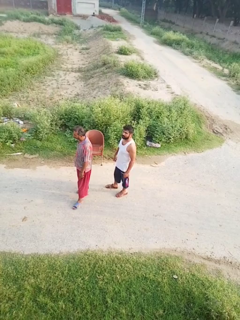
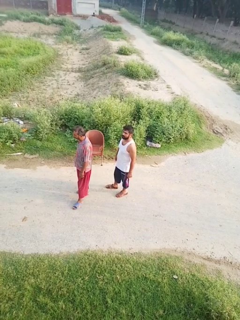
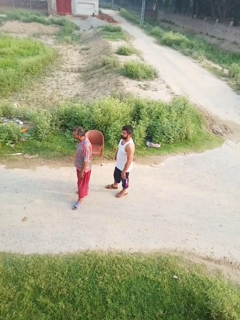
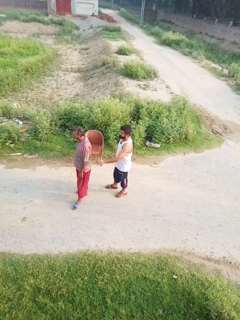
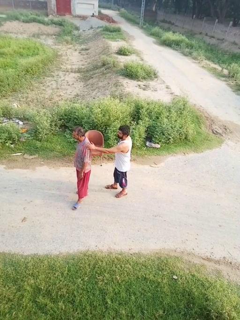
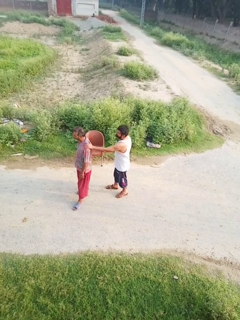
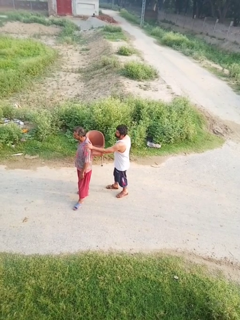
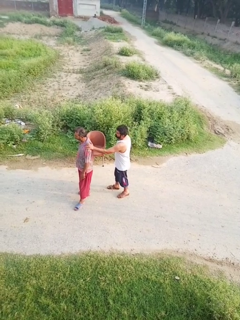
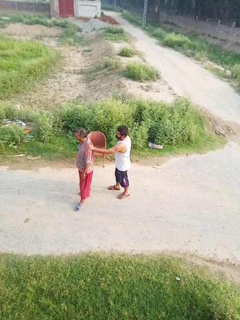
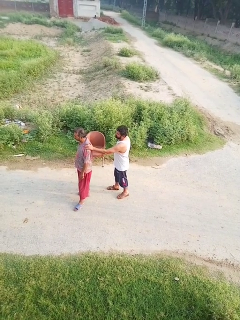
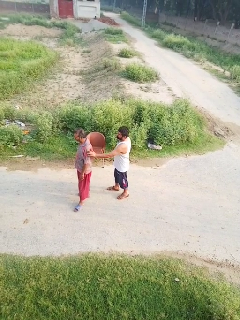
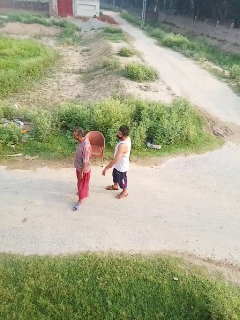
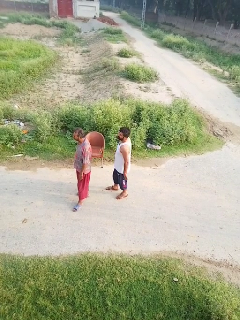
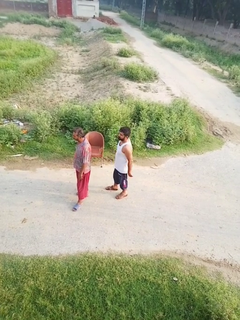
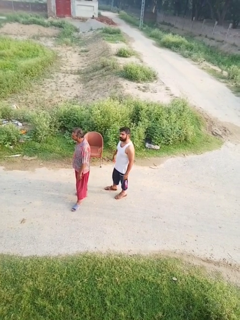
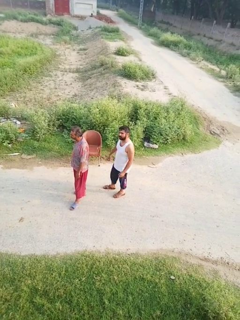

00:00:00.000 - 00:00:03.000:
person touches back of person

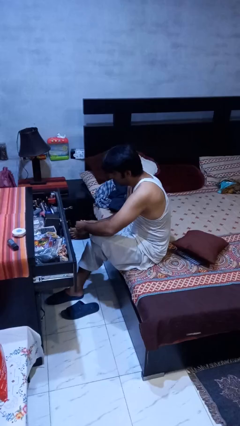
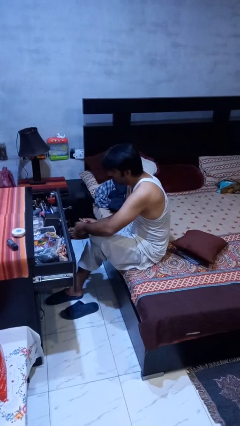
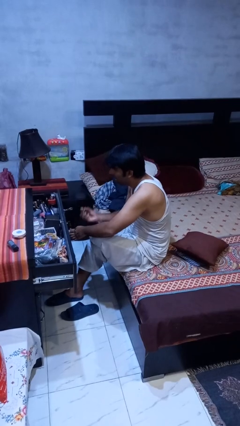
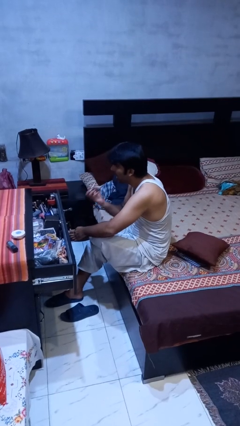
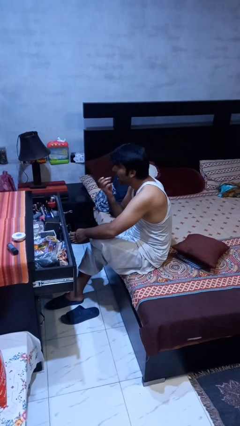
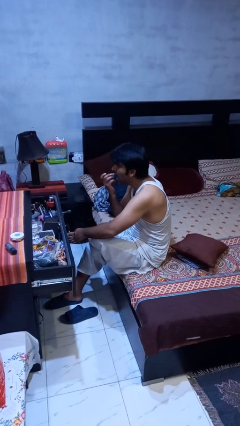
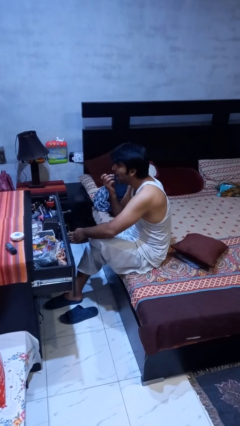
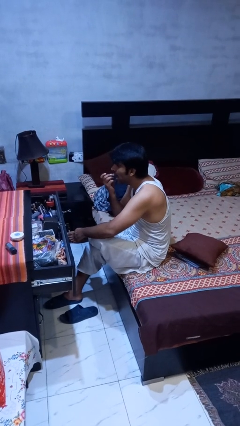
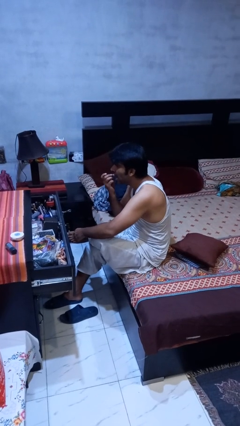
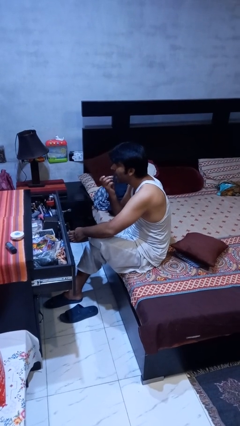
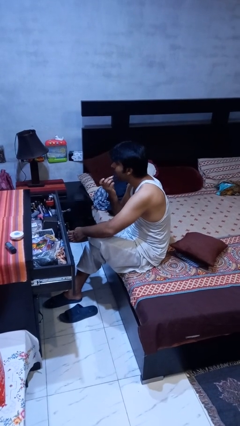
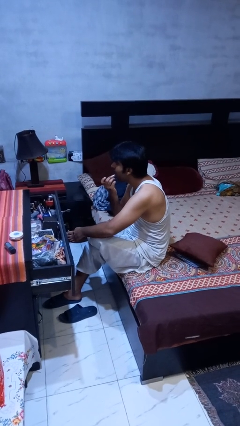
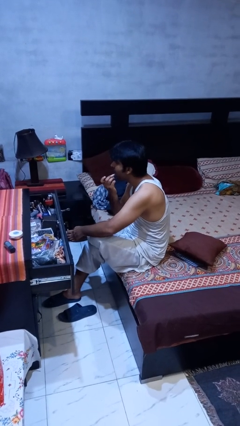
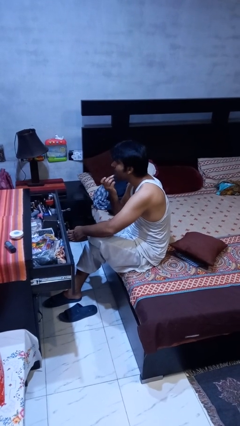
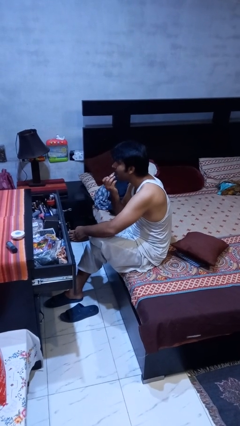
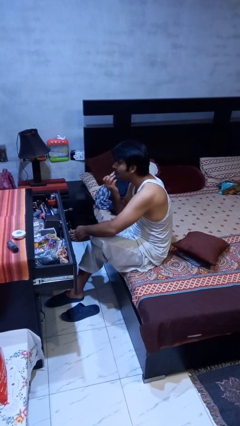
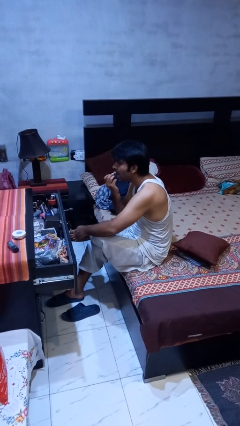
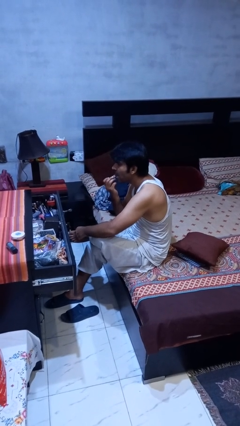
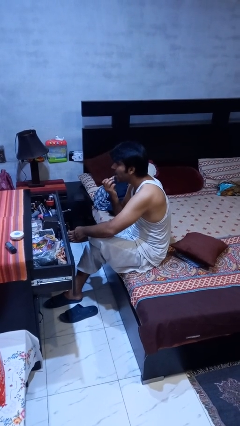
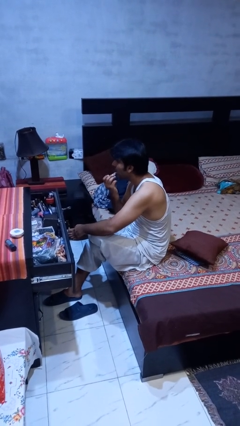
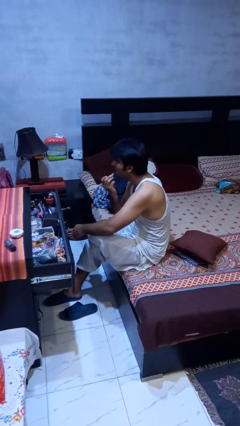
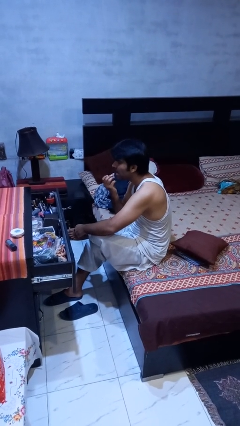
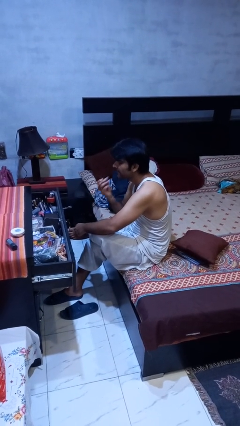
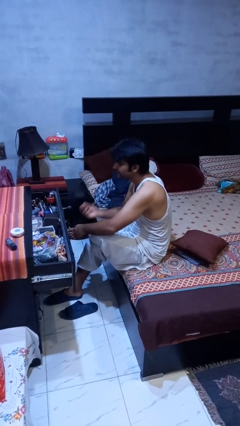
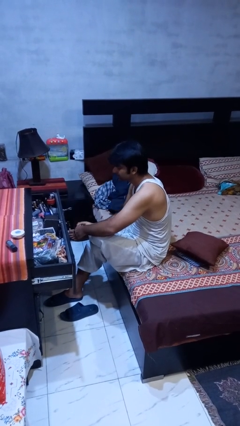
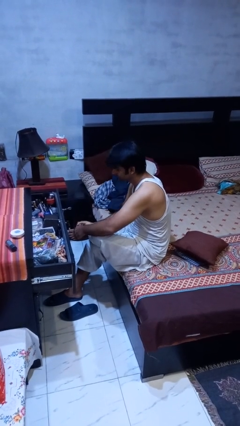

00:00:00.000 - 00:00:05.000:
person applies lip makeup

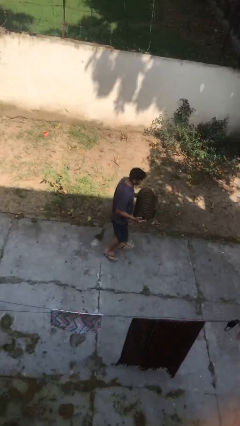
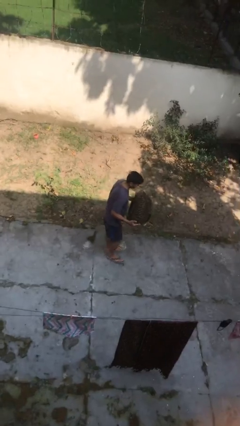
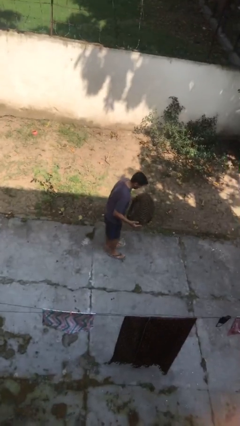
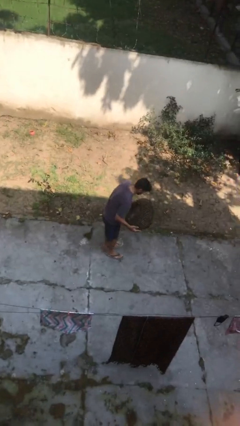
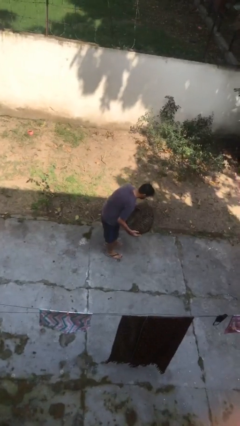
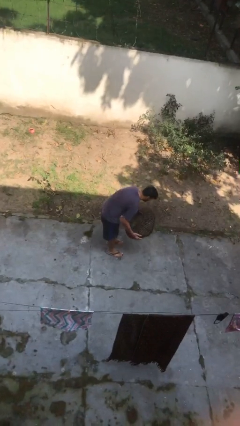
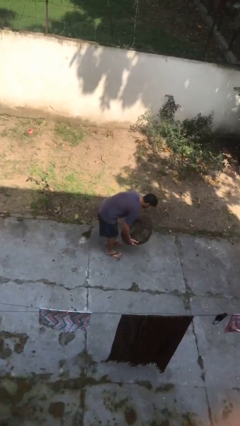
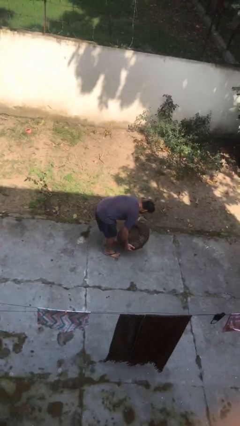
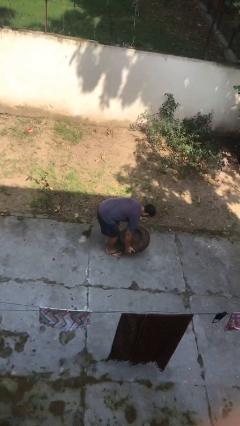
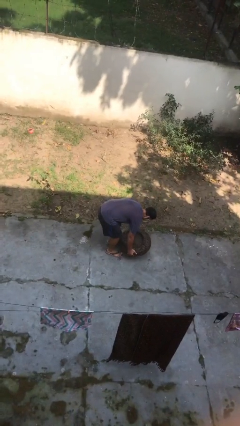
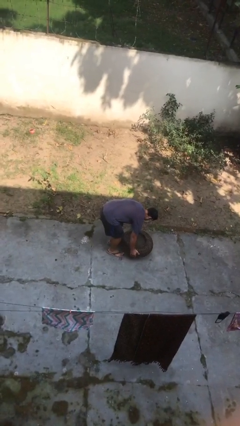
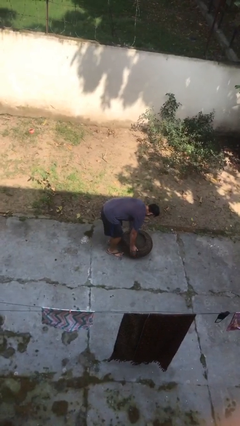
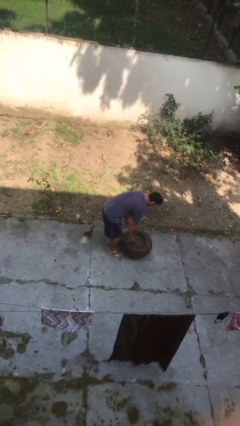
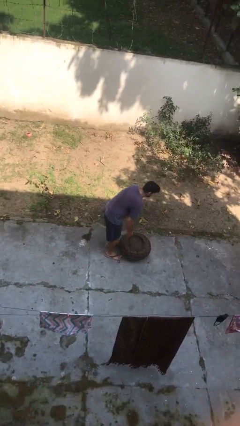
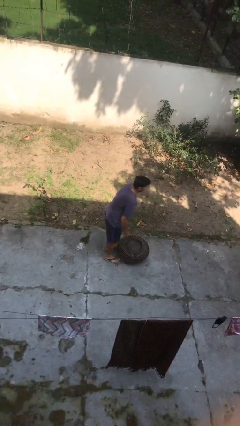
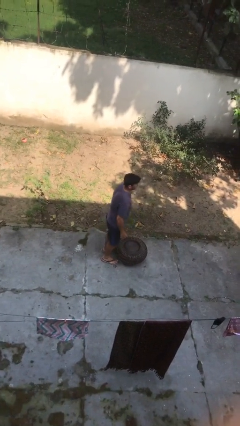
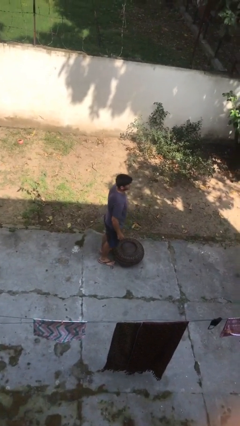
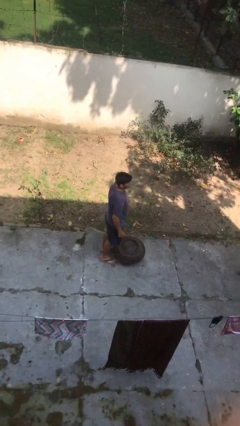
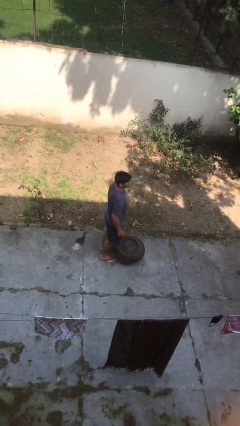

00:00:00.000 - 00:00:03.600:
person puts down object on floor

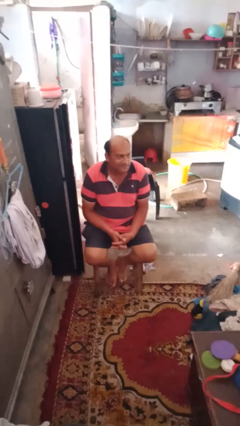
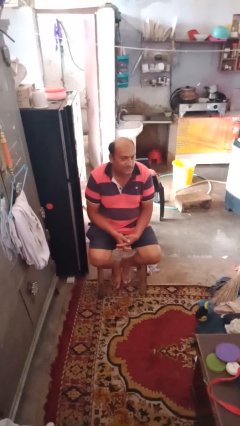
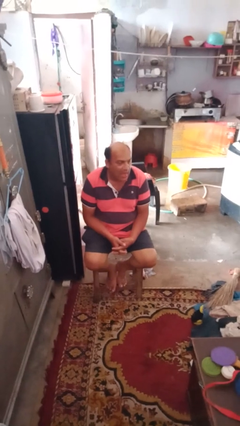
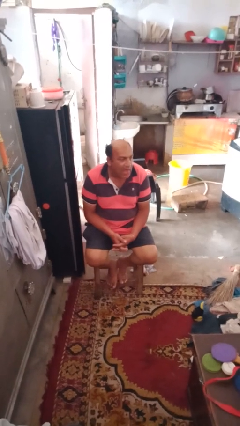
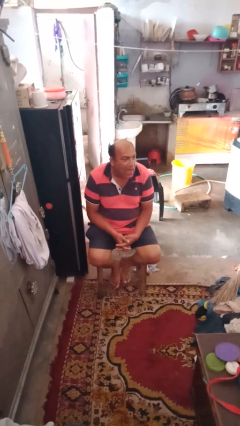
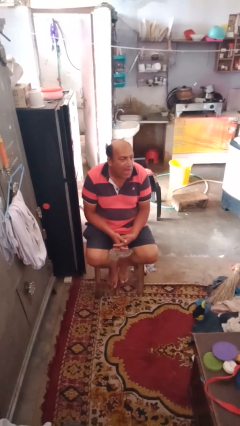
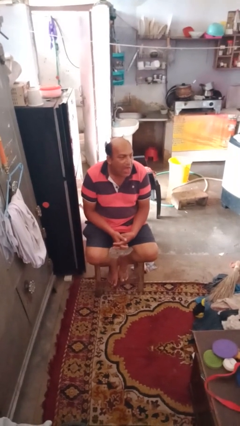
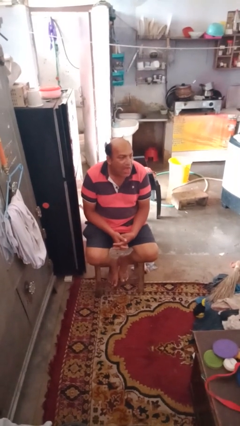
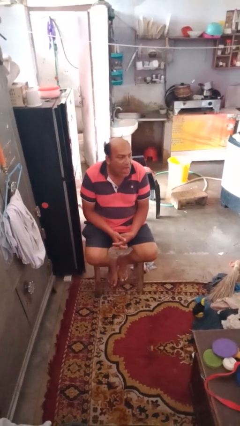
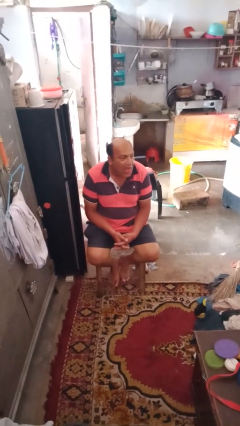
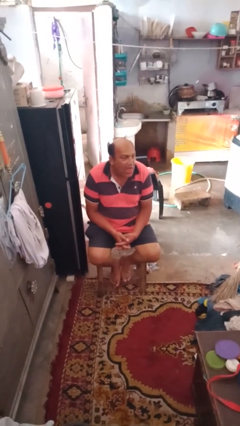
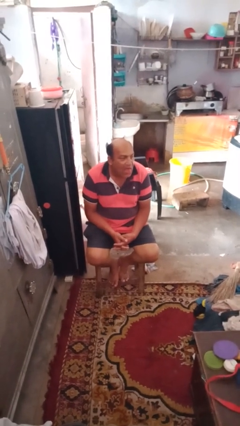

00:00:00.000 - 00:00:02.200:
person sticks out tongue

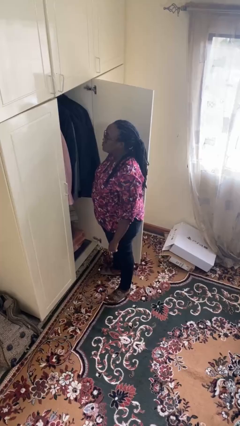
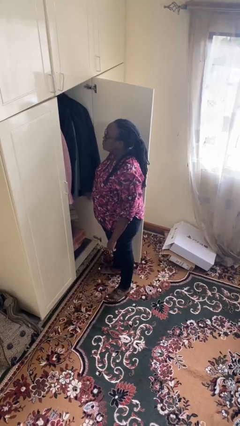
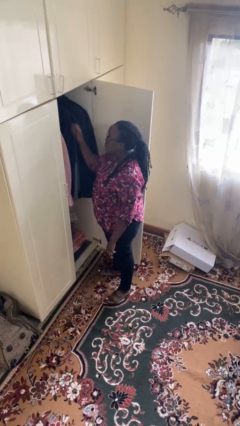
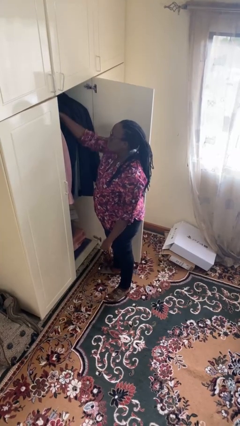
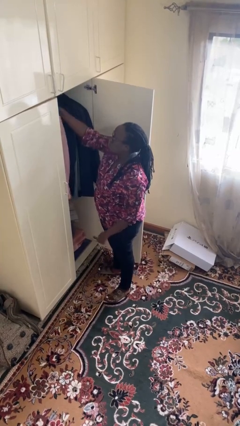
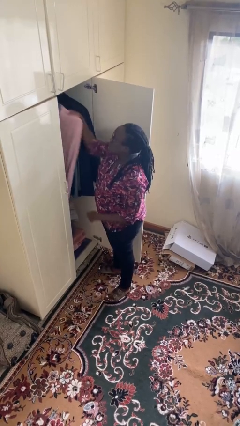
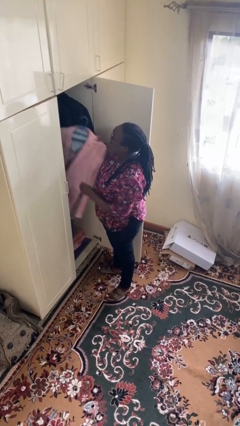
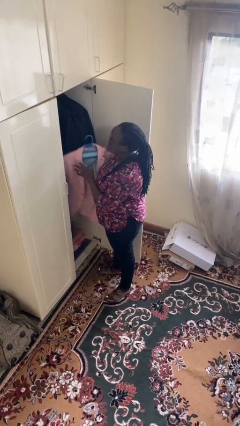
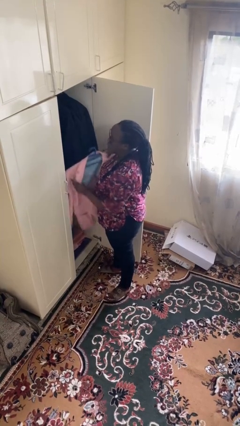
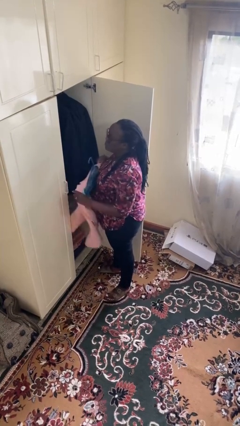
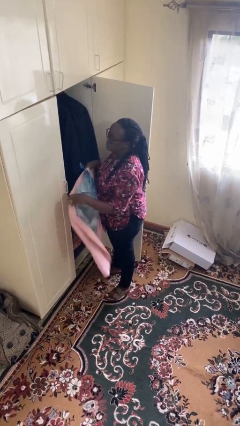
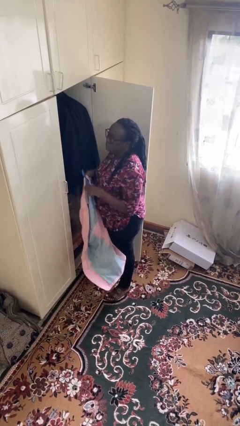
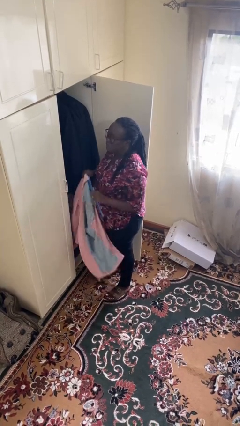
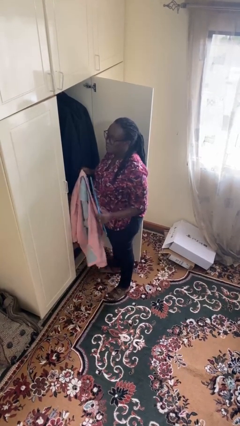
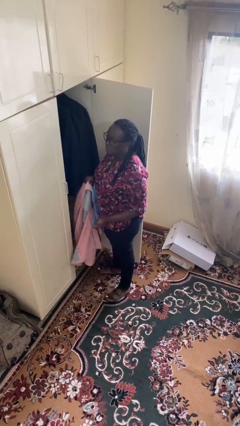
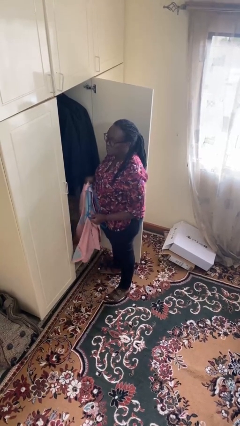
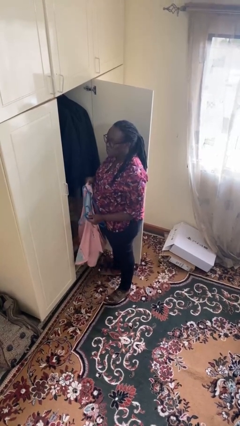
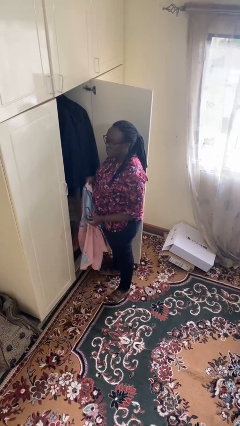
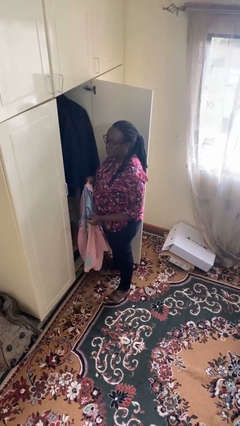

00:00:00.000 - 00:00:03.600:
person takes clothes from closet

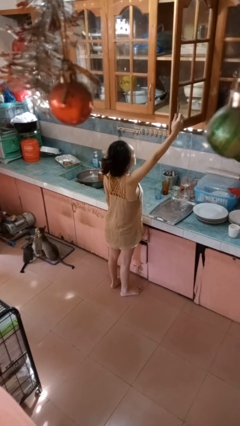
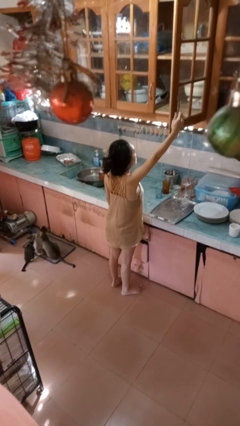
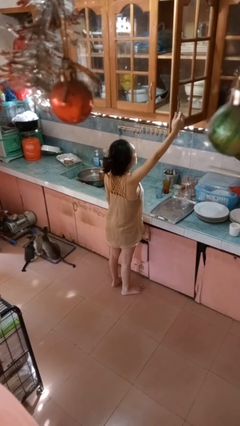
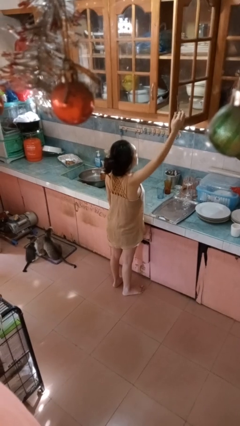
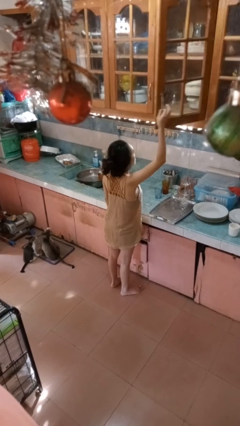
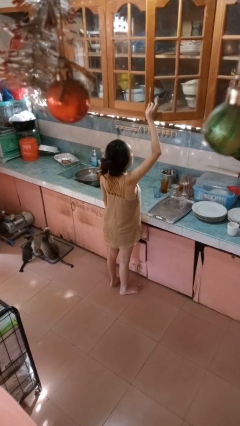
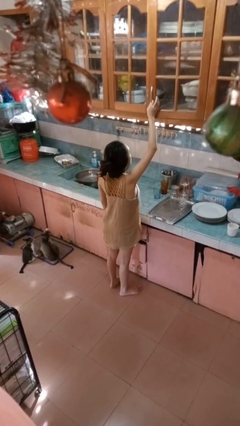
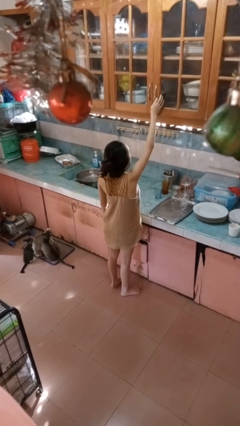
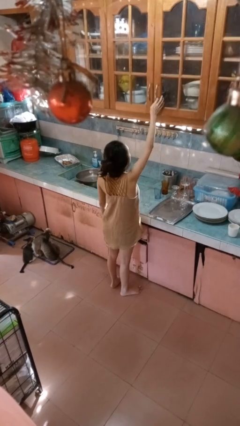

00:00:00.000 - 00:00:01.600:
person closes cabinet
